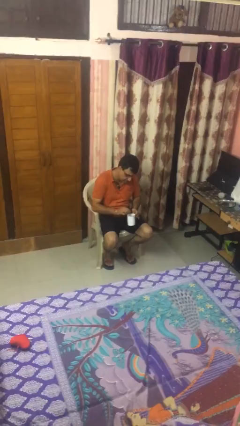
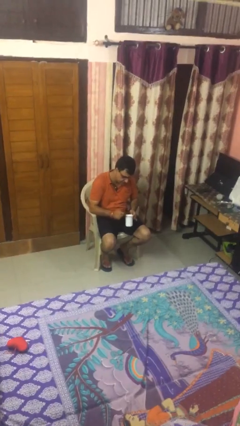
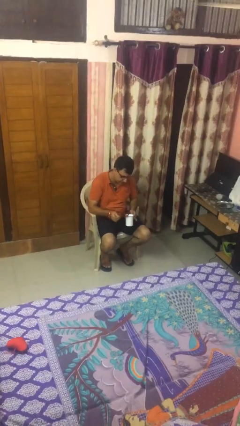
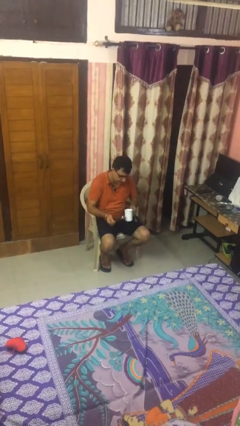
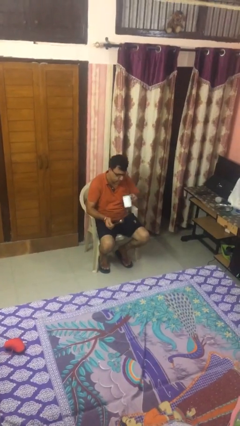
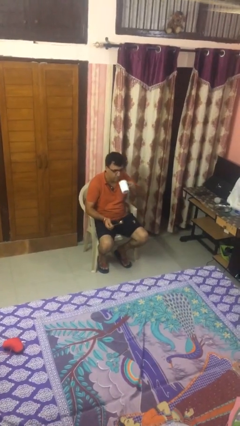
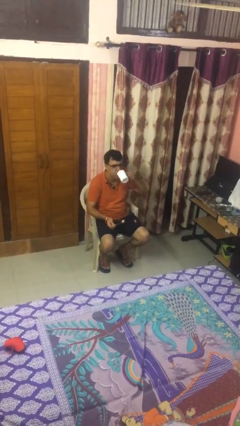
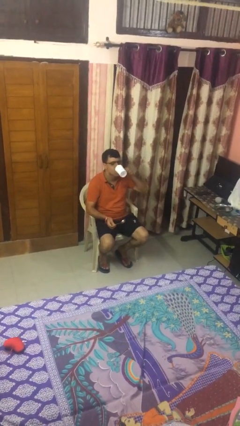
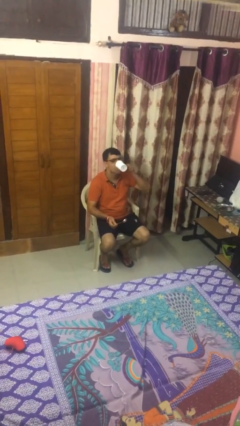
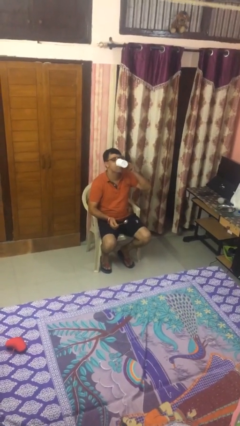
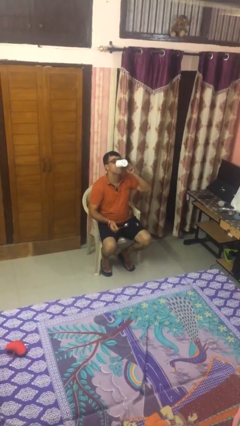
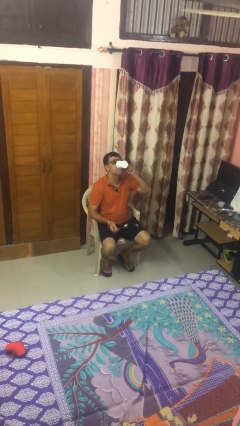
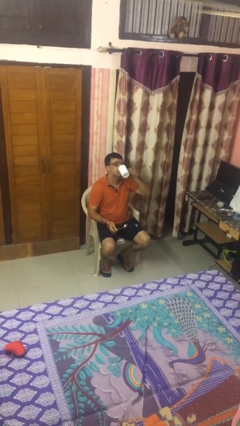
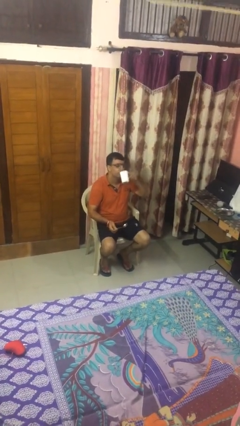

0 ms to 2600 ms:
person drinks from mug

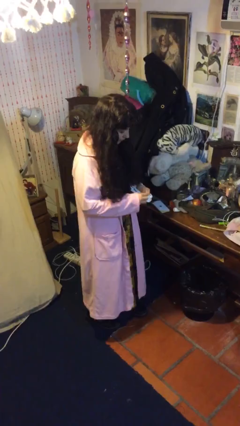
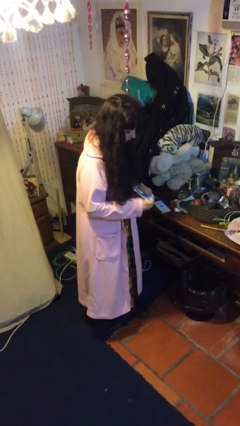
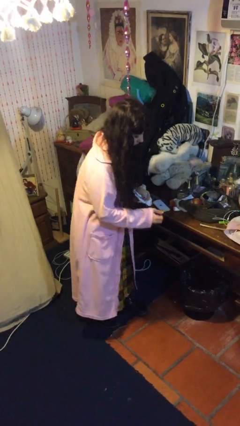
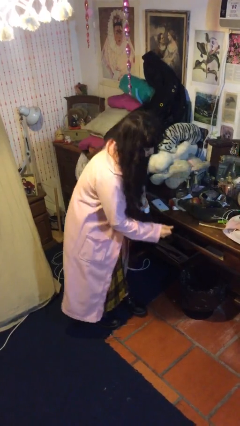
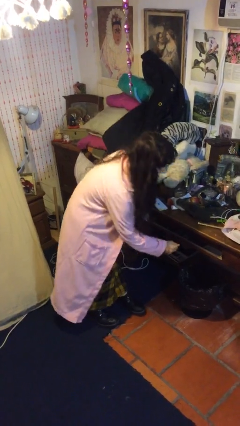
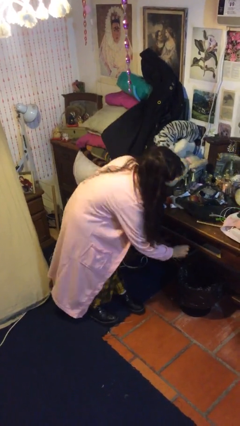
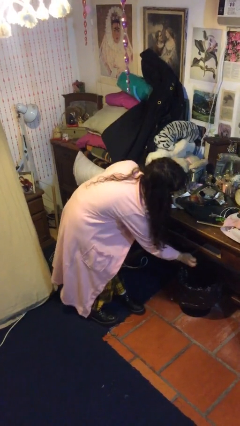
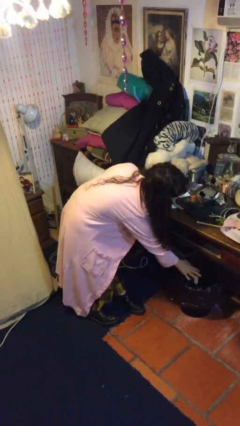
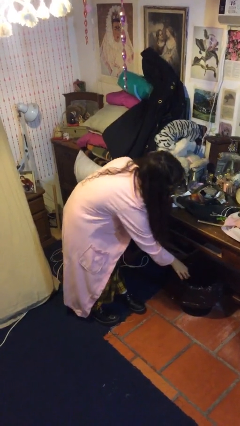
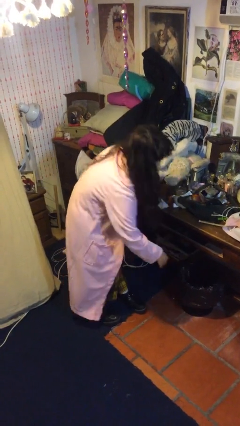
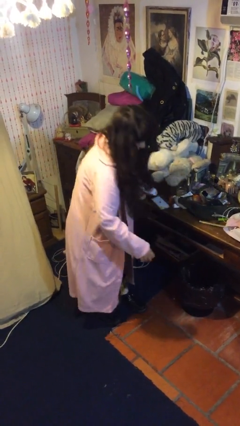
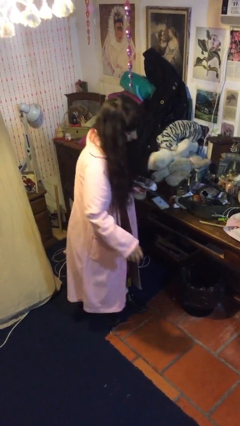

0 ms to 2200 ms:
person discards trash

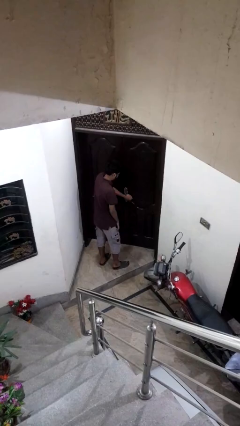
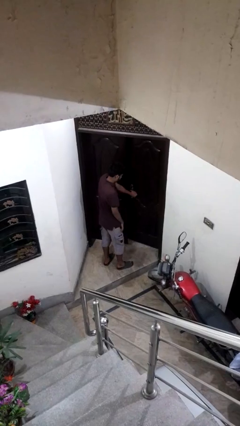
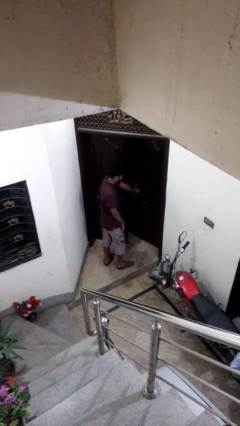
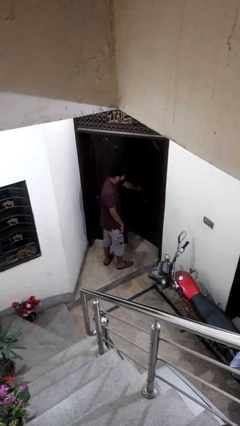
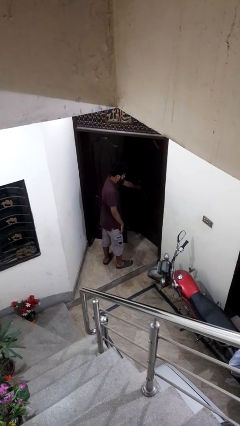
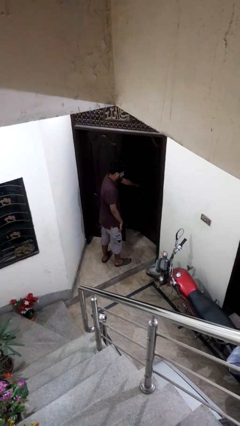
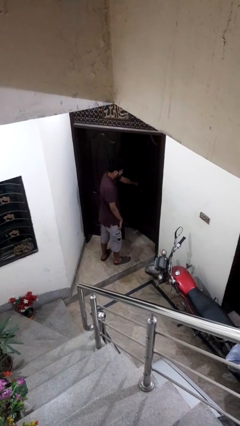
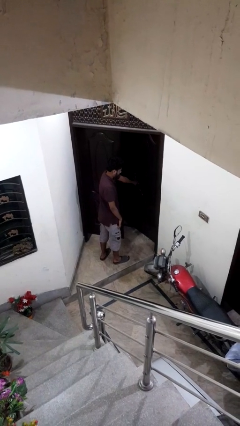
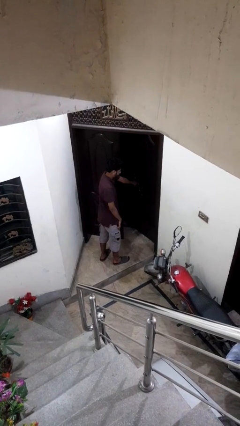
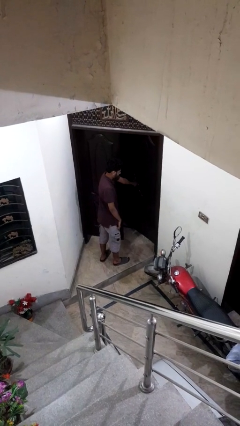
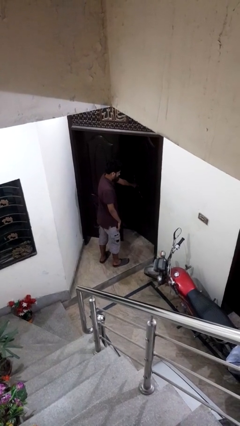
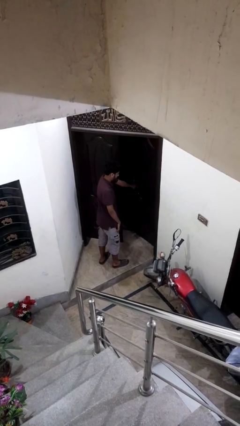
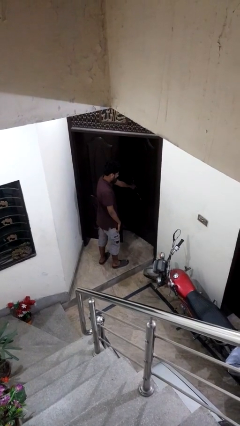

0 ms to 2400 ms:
person opens facility door

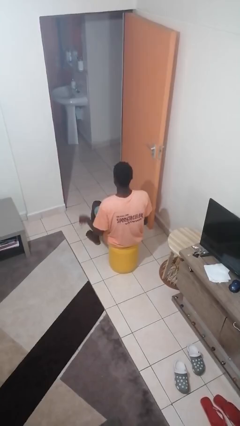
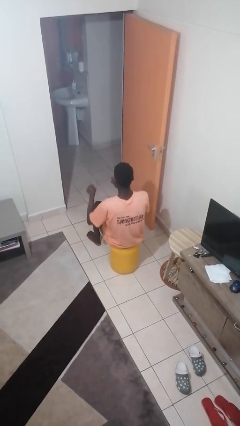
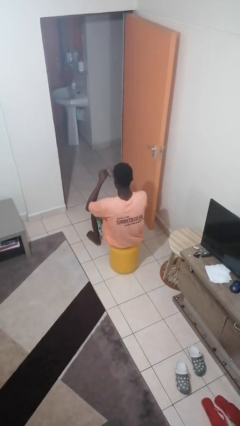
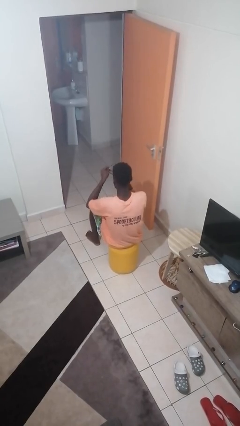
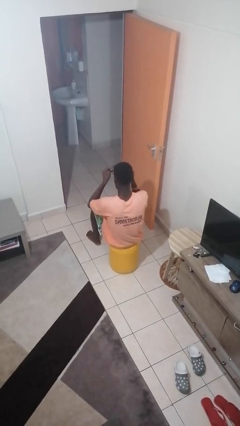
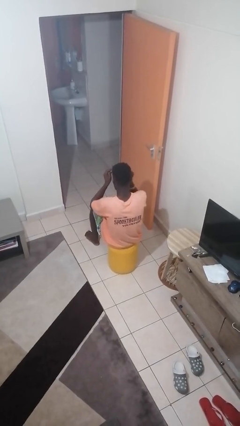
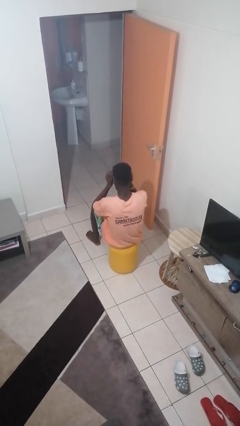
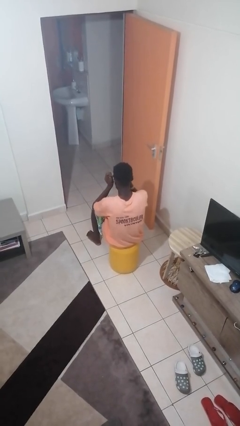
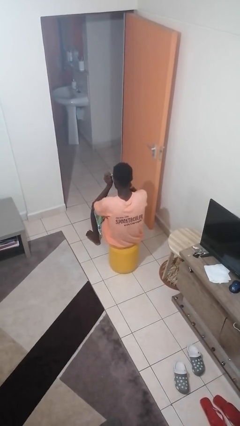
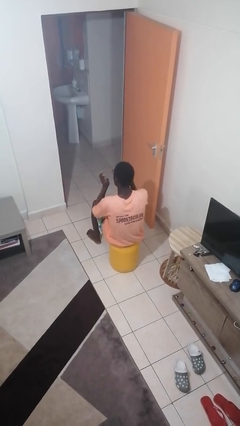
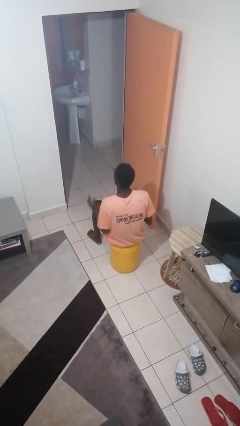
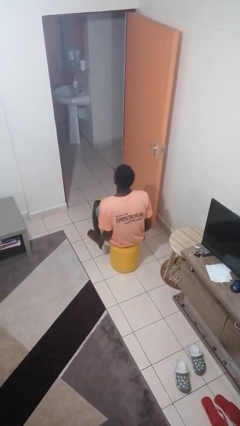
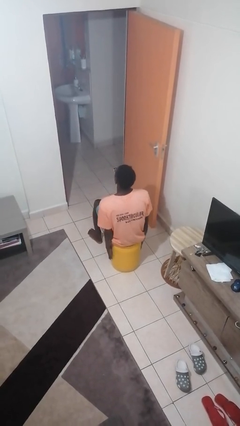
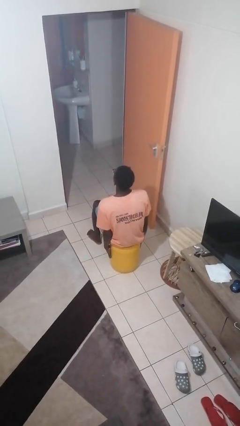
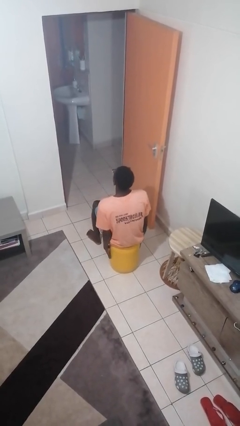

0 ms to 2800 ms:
person puts on glasses

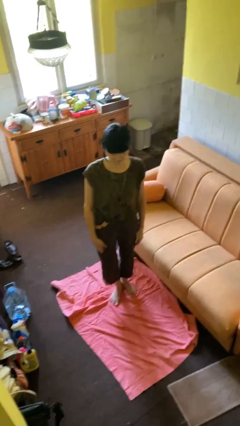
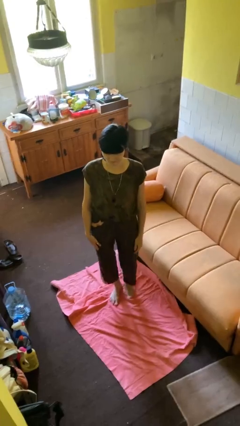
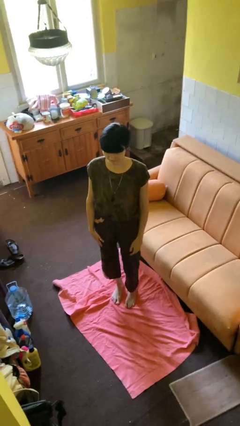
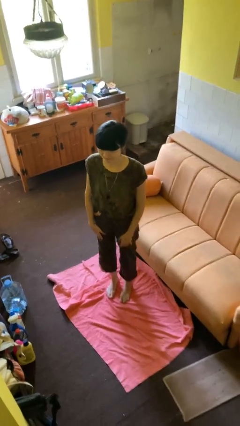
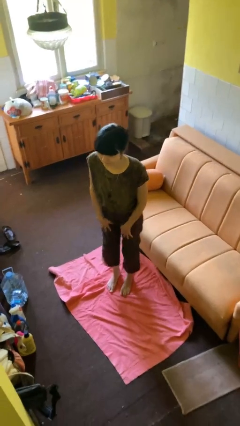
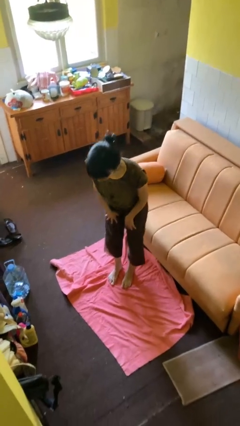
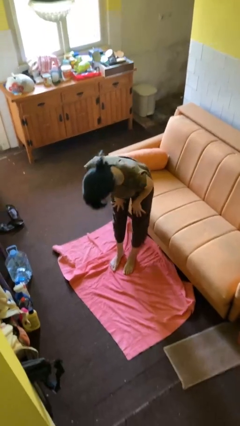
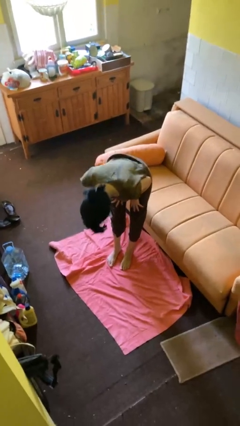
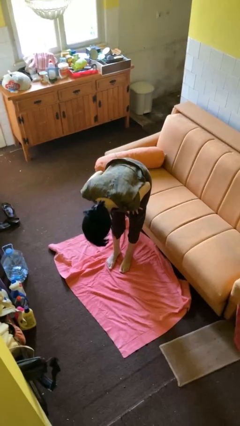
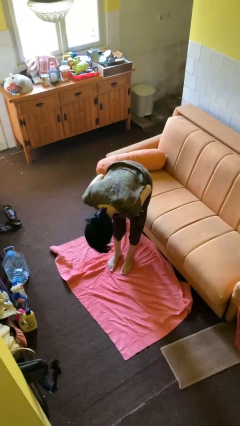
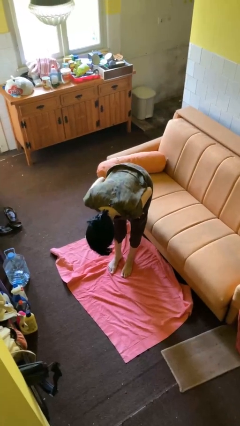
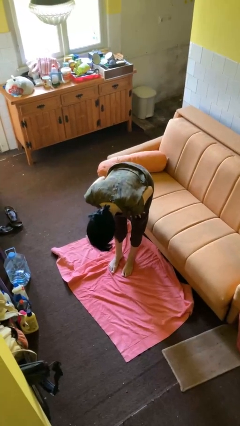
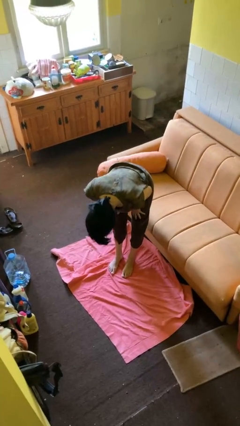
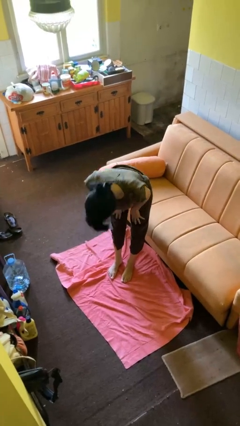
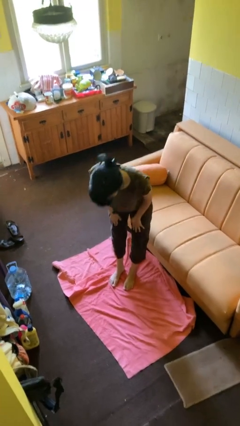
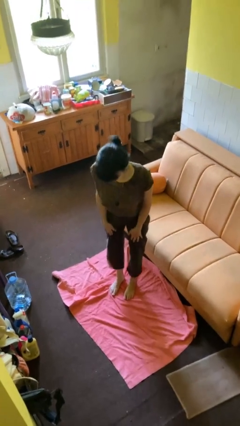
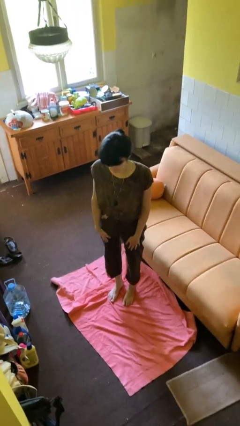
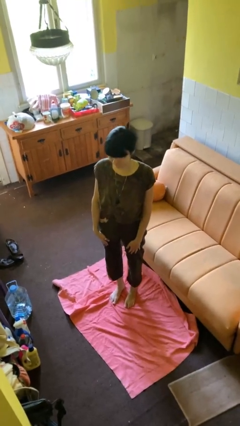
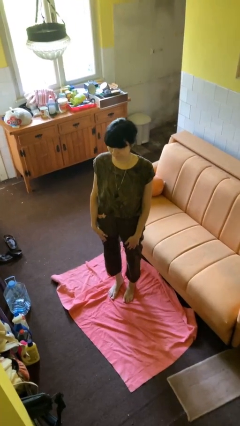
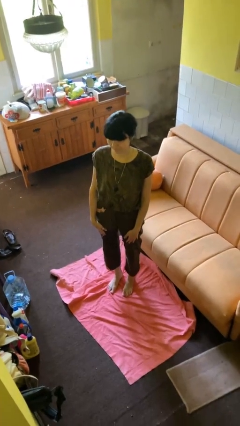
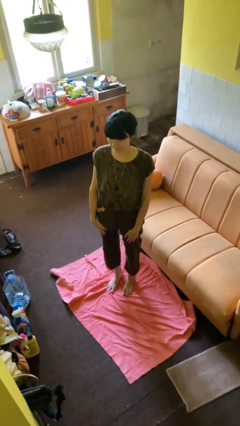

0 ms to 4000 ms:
person bows

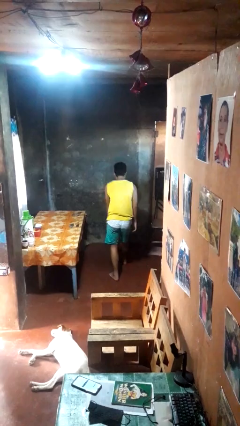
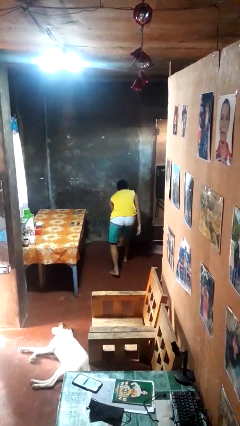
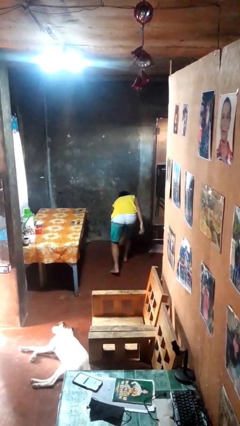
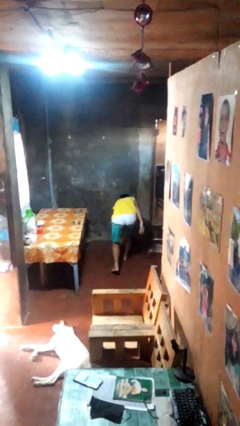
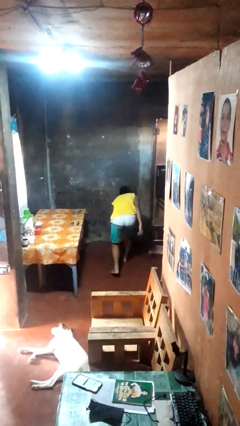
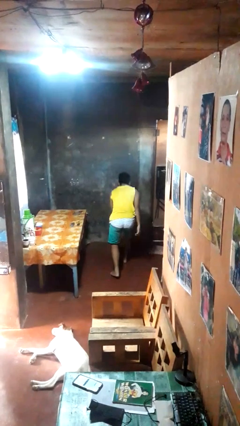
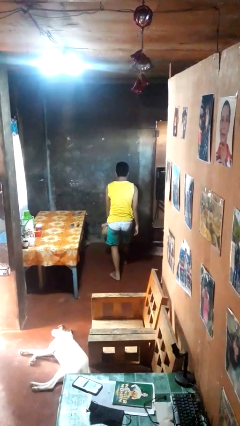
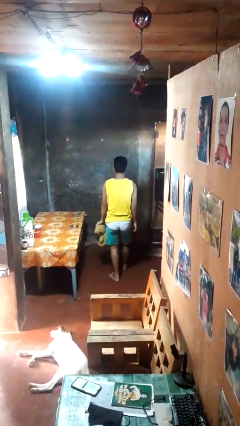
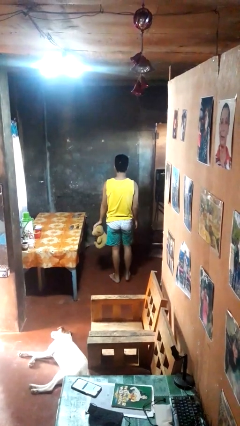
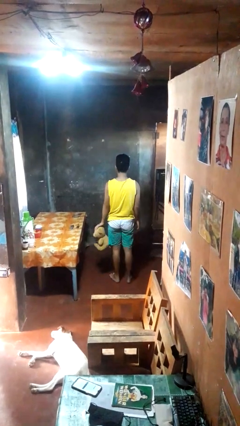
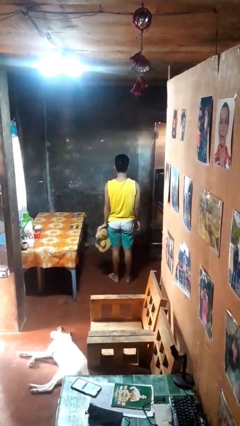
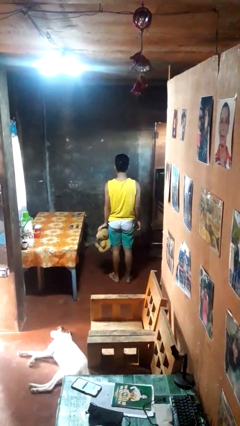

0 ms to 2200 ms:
person picks up object from floor

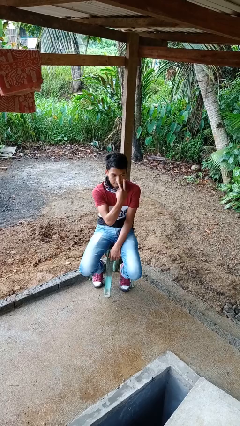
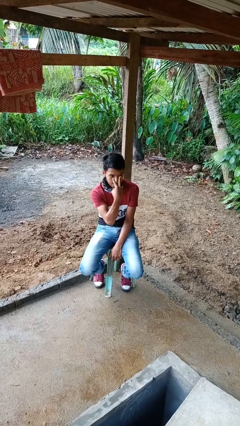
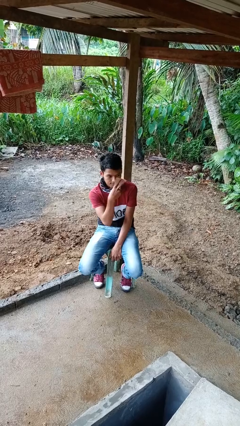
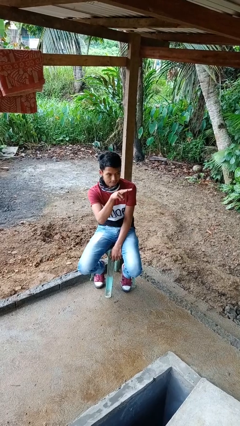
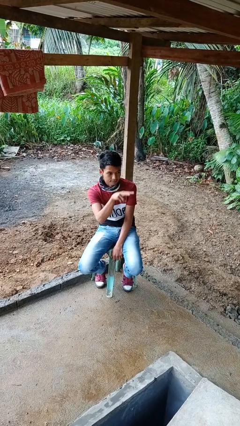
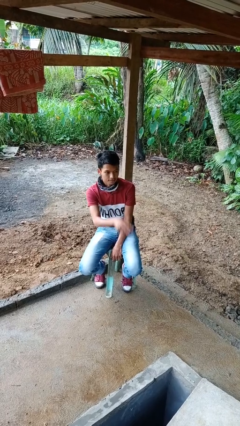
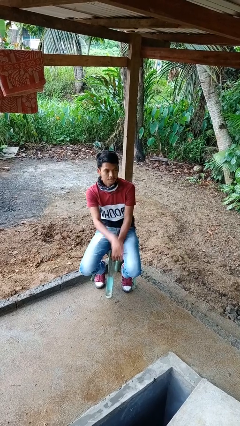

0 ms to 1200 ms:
person gestures watch closely
